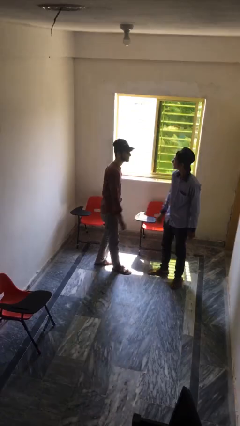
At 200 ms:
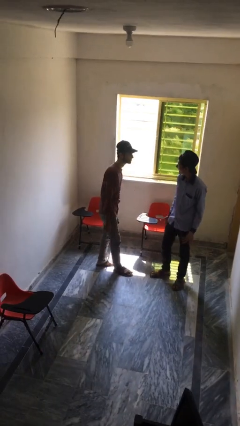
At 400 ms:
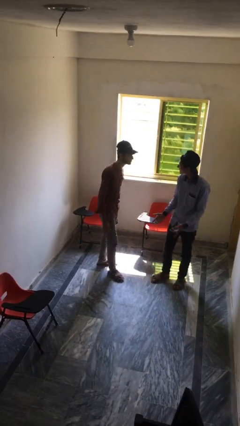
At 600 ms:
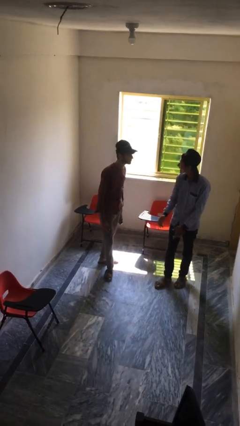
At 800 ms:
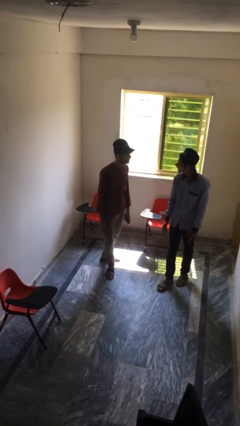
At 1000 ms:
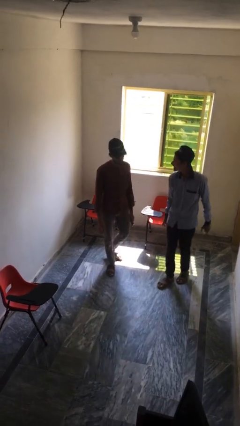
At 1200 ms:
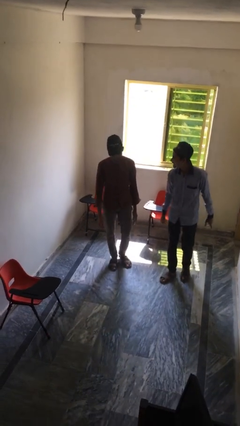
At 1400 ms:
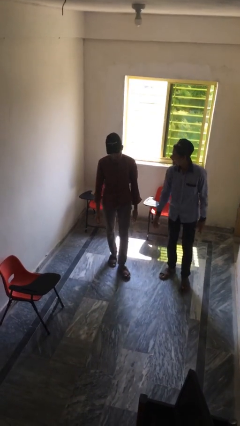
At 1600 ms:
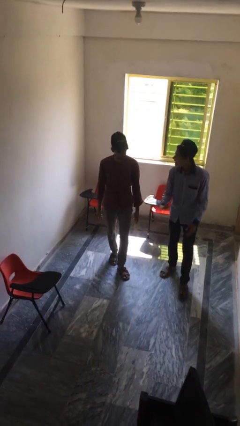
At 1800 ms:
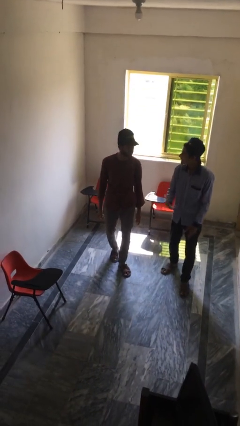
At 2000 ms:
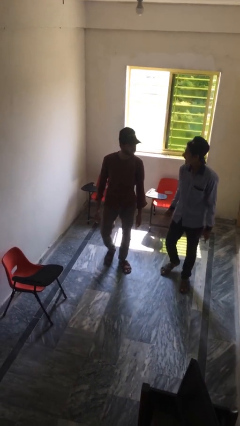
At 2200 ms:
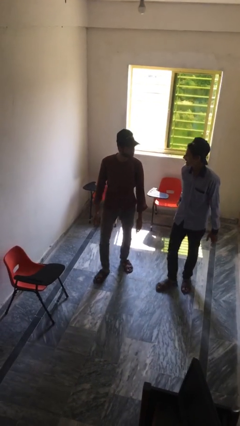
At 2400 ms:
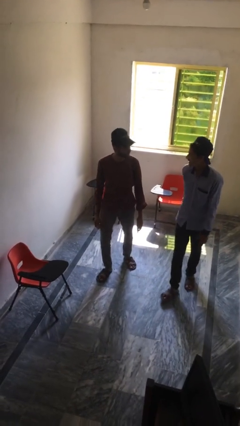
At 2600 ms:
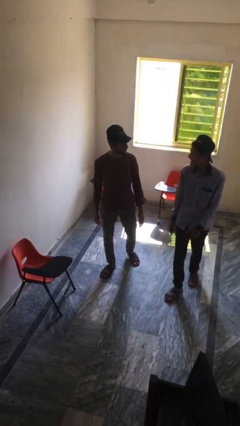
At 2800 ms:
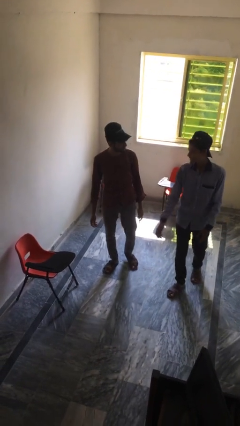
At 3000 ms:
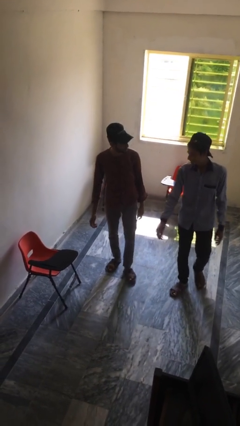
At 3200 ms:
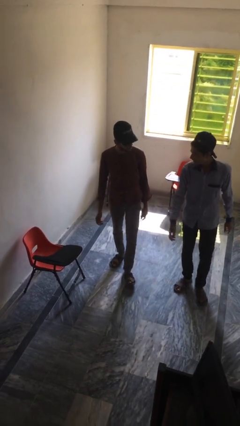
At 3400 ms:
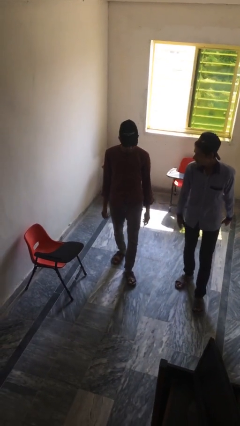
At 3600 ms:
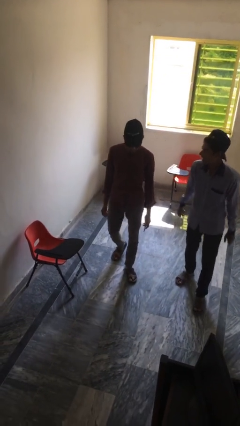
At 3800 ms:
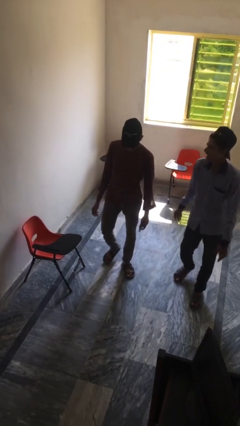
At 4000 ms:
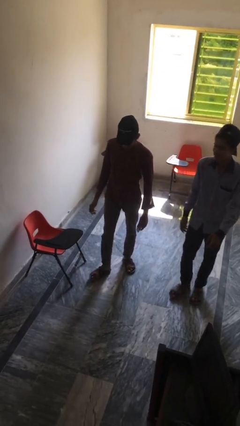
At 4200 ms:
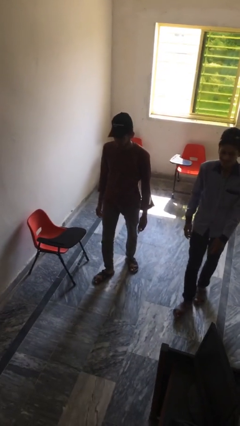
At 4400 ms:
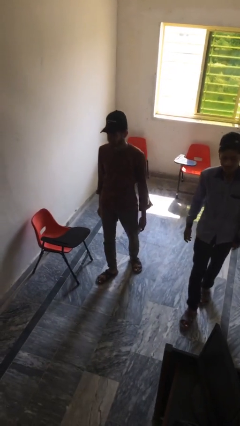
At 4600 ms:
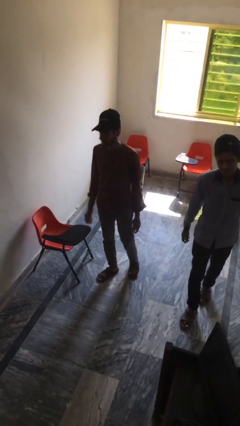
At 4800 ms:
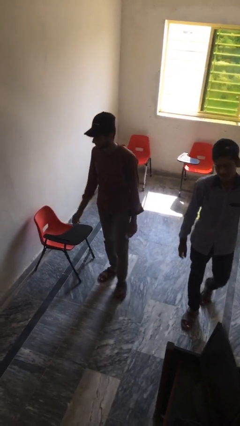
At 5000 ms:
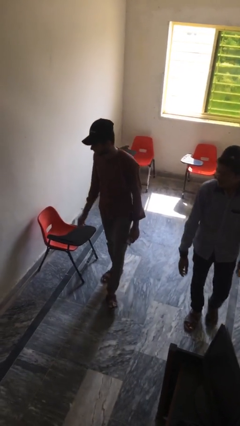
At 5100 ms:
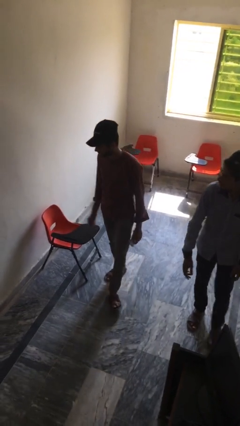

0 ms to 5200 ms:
person talks to person

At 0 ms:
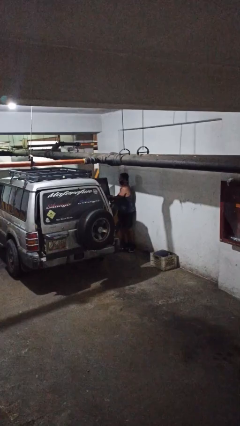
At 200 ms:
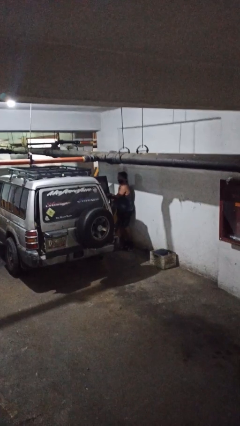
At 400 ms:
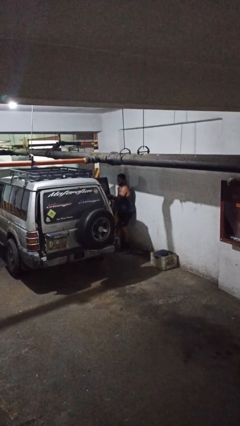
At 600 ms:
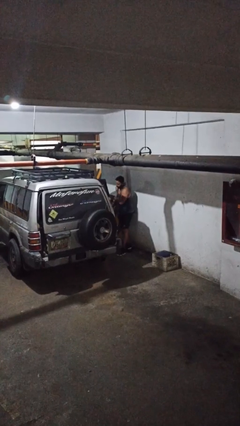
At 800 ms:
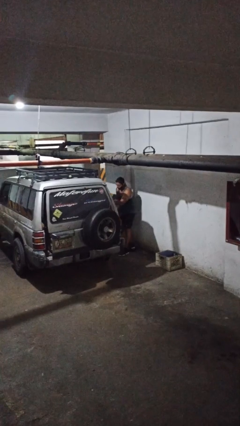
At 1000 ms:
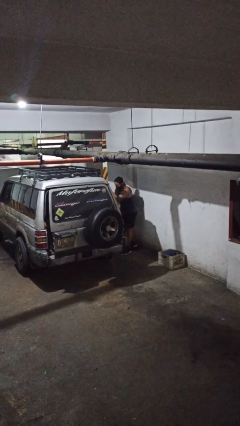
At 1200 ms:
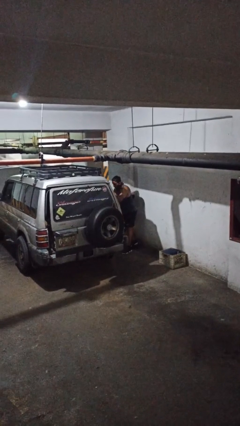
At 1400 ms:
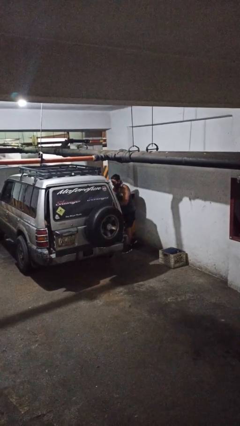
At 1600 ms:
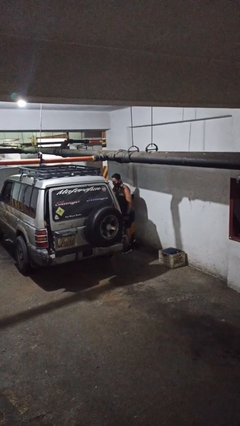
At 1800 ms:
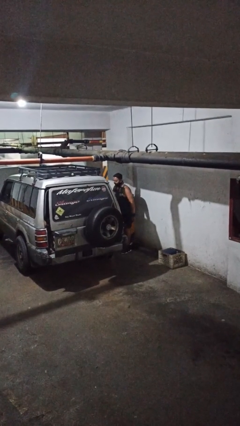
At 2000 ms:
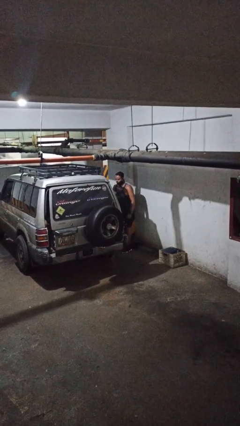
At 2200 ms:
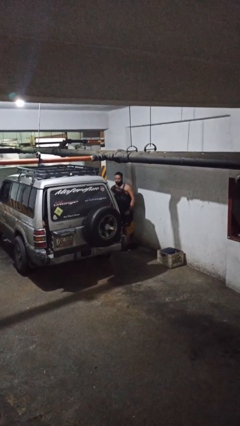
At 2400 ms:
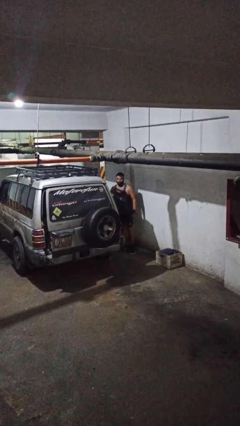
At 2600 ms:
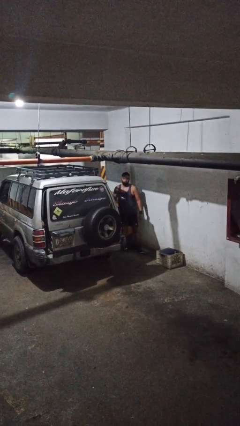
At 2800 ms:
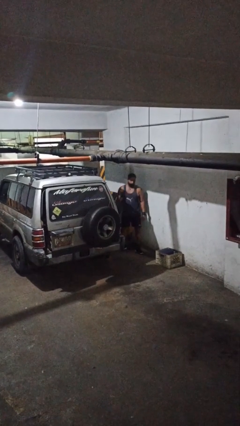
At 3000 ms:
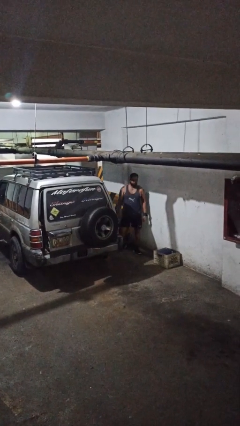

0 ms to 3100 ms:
person closes car door

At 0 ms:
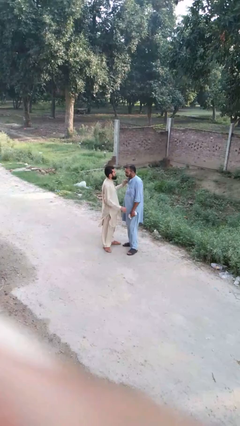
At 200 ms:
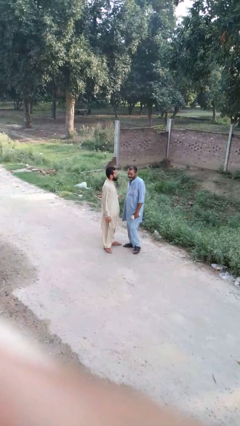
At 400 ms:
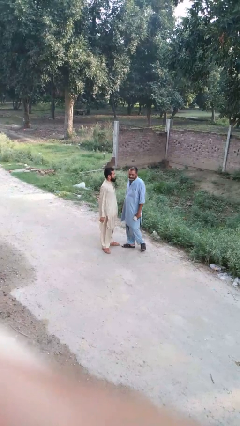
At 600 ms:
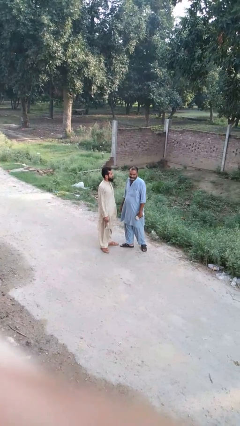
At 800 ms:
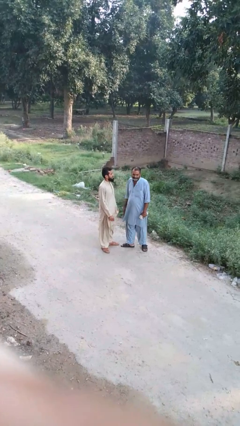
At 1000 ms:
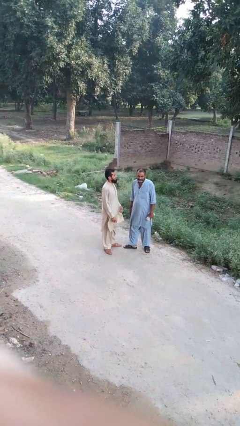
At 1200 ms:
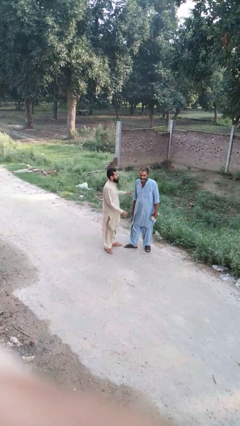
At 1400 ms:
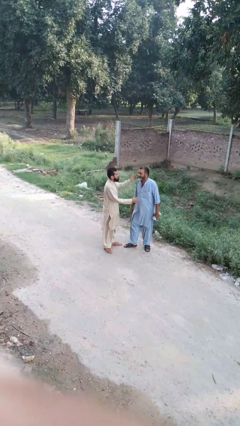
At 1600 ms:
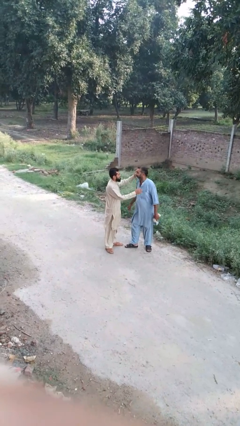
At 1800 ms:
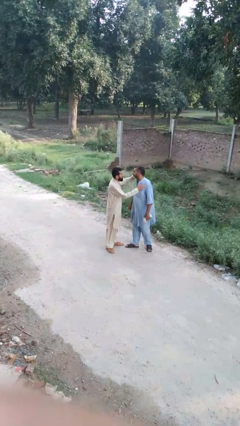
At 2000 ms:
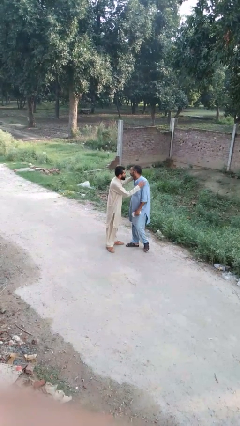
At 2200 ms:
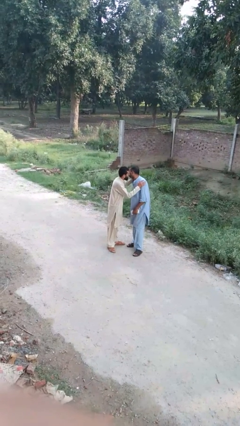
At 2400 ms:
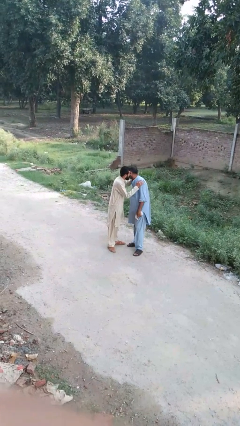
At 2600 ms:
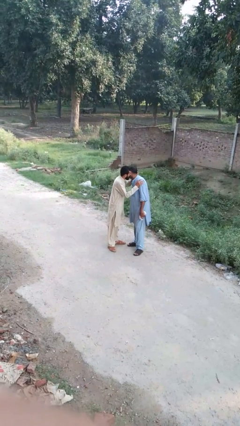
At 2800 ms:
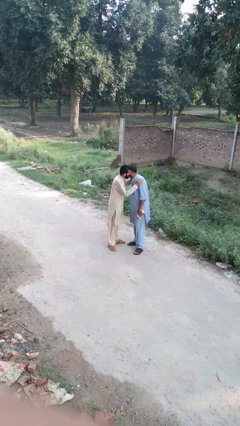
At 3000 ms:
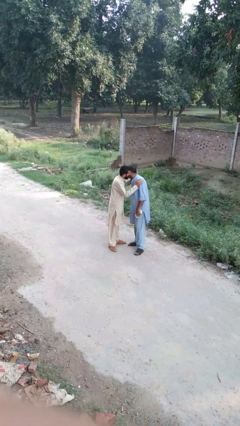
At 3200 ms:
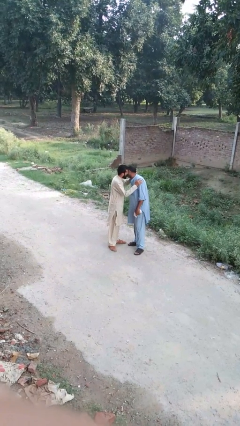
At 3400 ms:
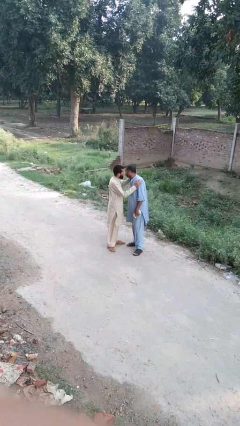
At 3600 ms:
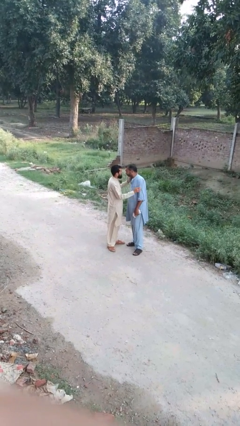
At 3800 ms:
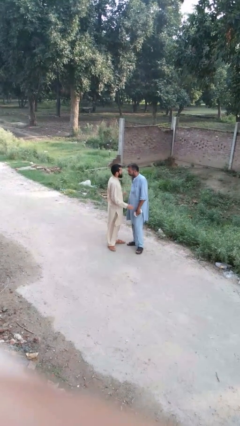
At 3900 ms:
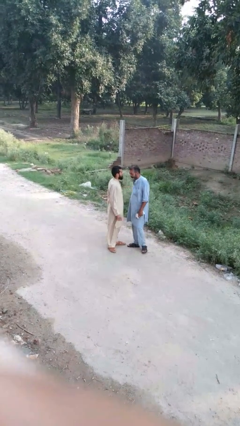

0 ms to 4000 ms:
person kisses cheek of person

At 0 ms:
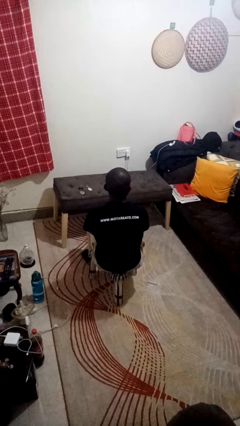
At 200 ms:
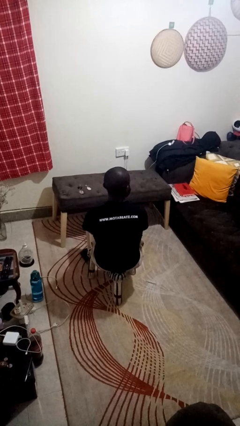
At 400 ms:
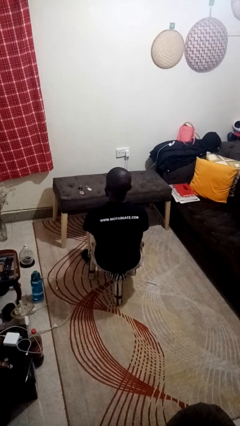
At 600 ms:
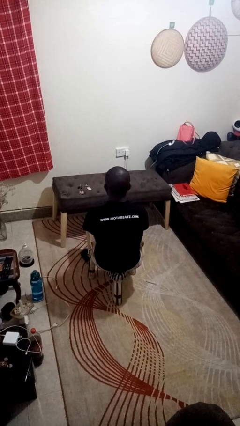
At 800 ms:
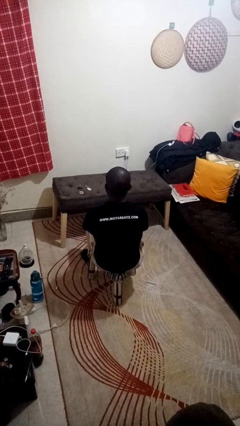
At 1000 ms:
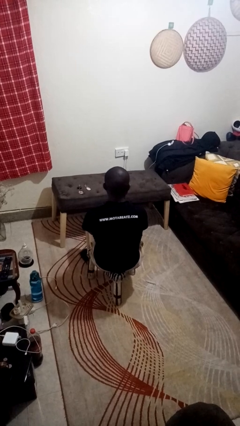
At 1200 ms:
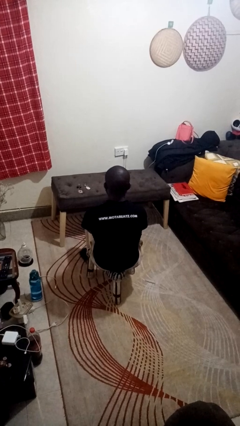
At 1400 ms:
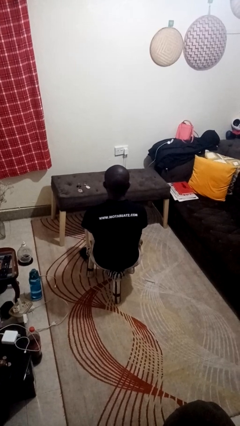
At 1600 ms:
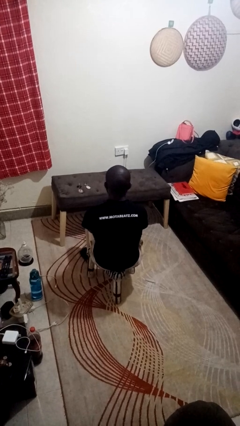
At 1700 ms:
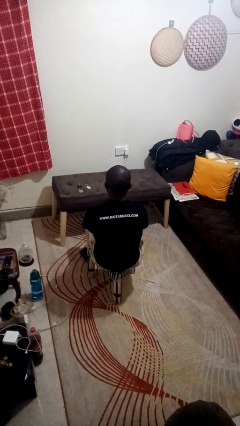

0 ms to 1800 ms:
person shakes head

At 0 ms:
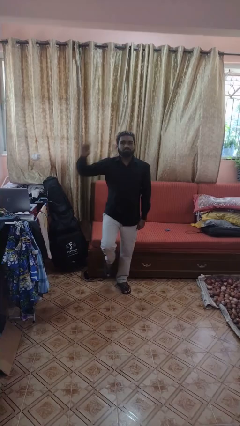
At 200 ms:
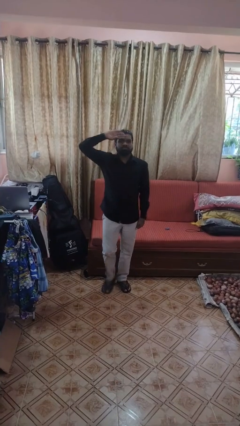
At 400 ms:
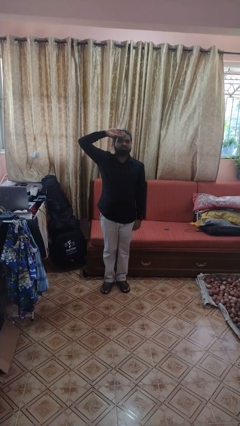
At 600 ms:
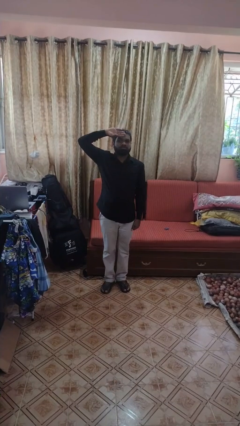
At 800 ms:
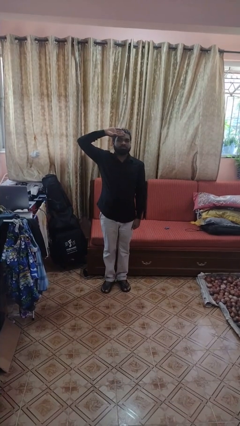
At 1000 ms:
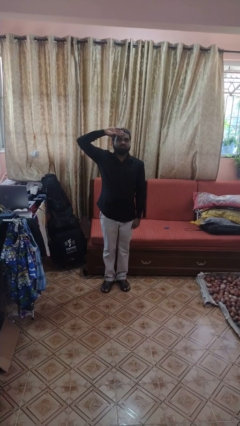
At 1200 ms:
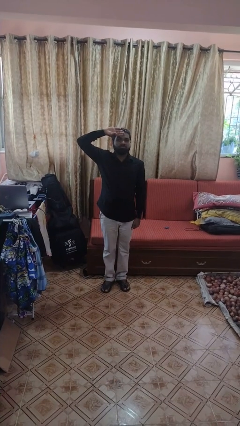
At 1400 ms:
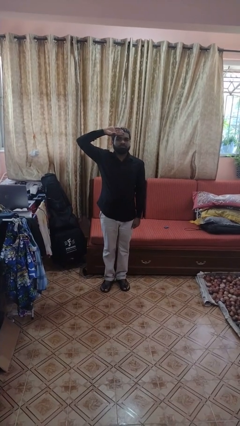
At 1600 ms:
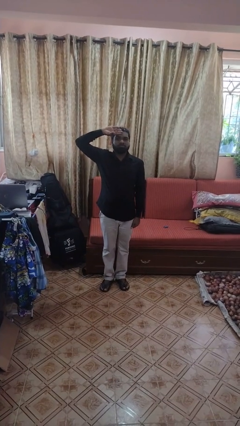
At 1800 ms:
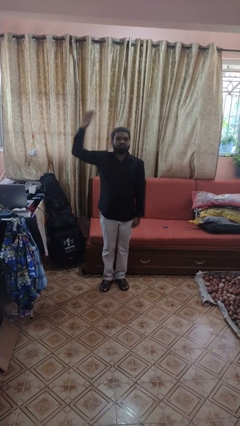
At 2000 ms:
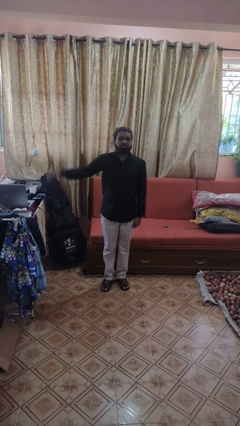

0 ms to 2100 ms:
person salutes

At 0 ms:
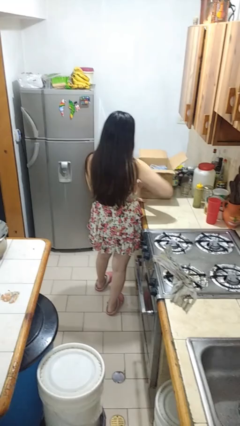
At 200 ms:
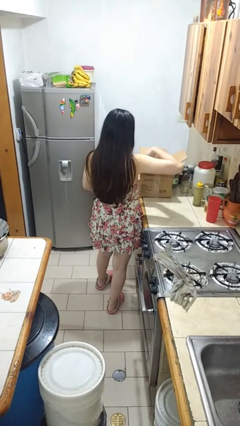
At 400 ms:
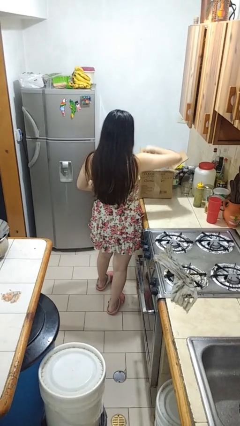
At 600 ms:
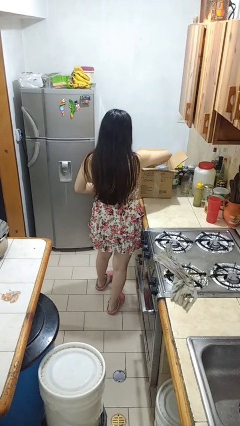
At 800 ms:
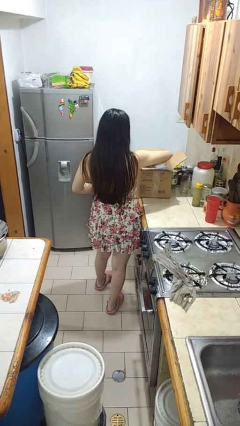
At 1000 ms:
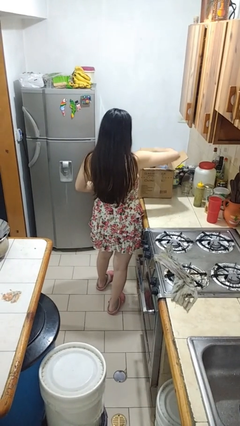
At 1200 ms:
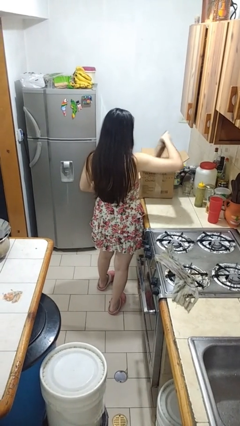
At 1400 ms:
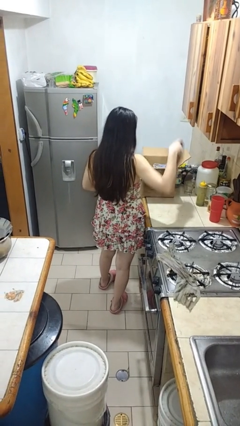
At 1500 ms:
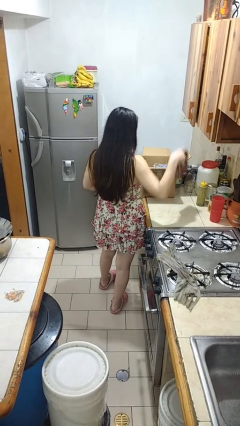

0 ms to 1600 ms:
person takes object from box
